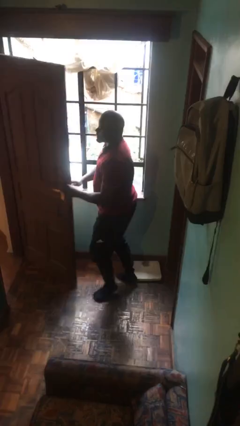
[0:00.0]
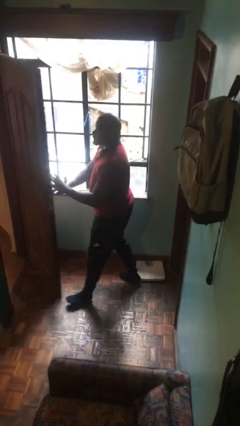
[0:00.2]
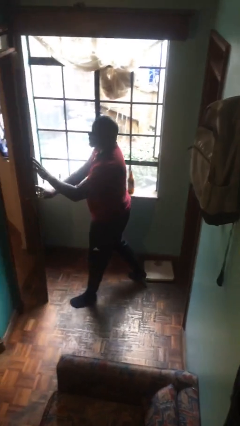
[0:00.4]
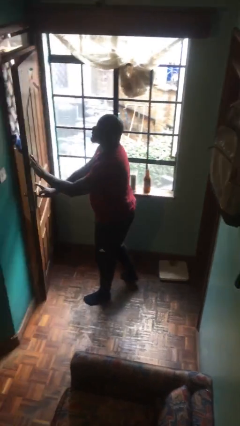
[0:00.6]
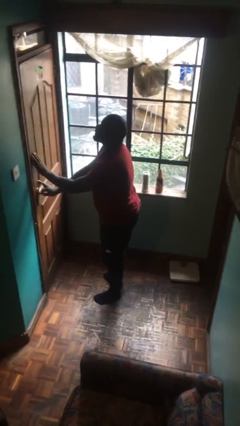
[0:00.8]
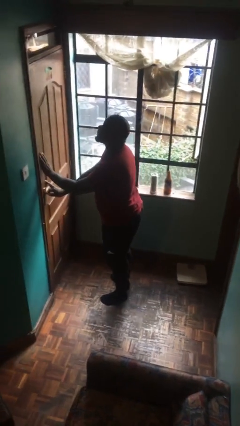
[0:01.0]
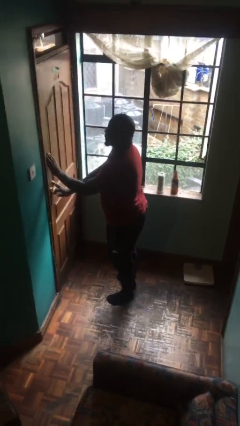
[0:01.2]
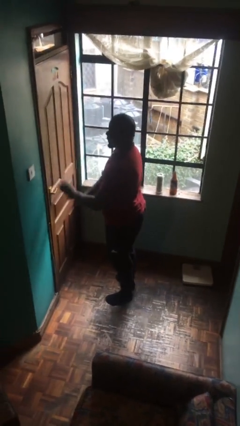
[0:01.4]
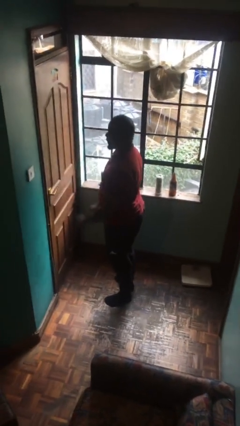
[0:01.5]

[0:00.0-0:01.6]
person closes facility door

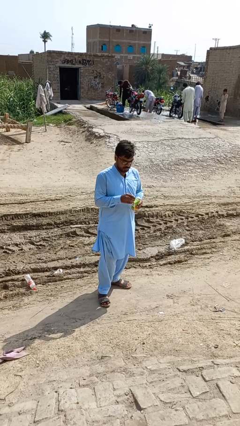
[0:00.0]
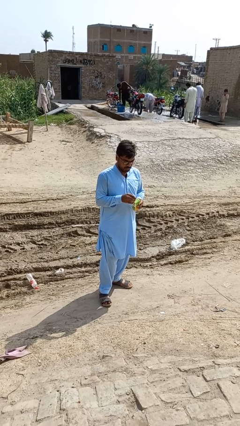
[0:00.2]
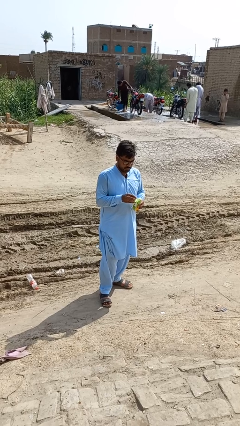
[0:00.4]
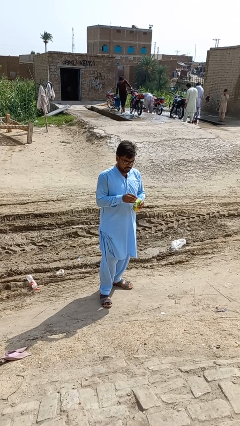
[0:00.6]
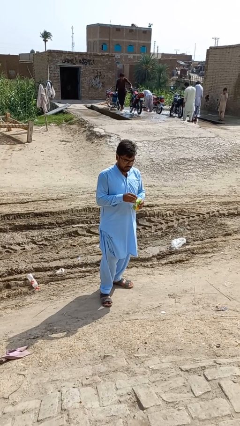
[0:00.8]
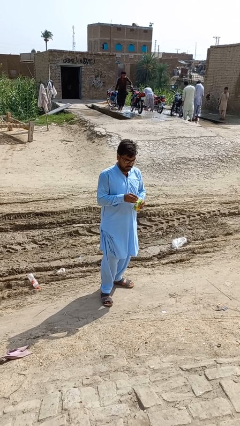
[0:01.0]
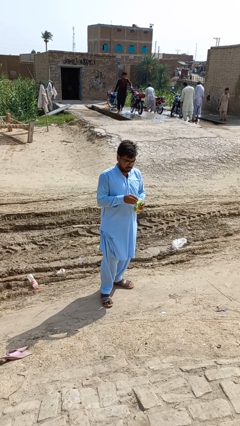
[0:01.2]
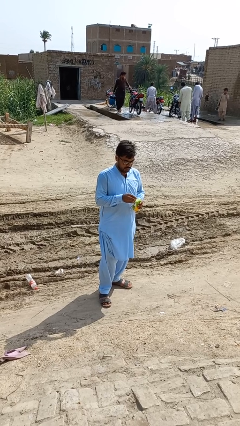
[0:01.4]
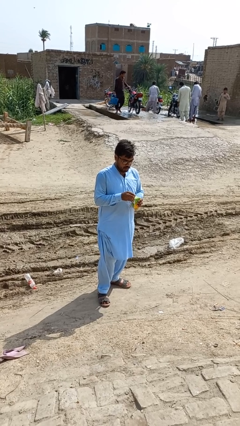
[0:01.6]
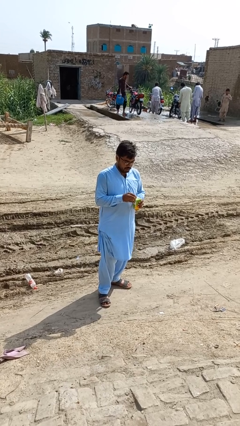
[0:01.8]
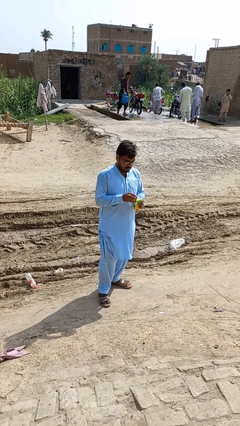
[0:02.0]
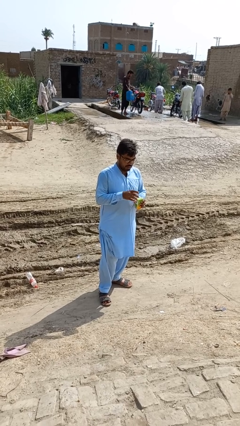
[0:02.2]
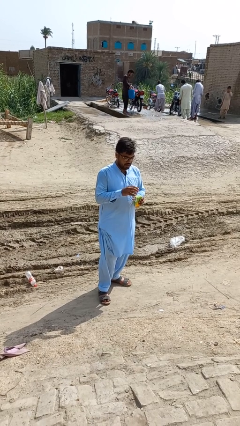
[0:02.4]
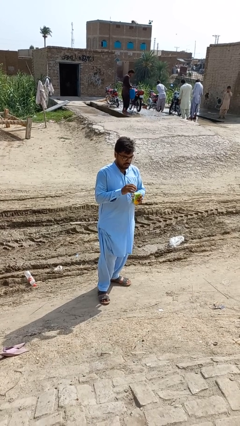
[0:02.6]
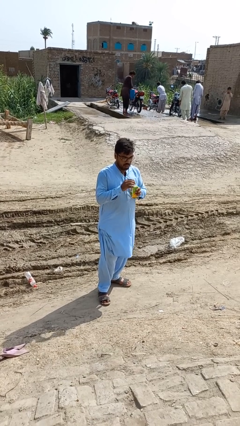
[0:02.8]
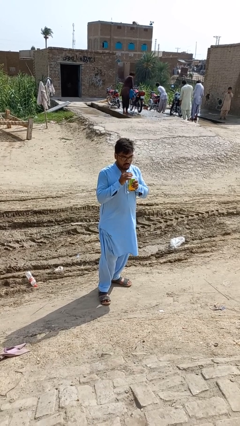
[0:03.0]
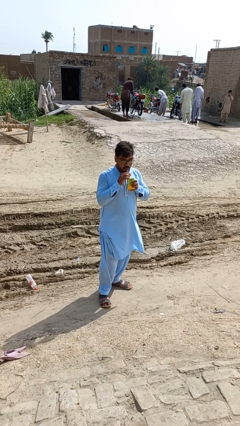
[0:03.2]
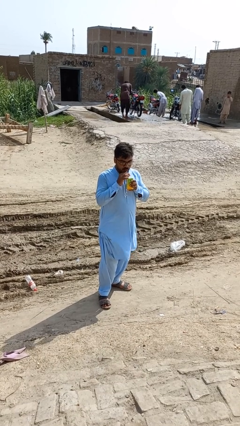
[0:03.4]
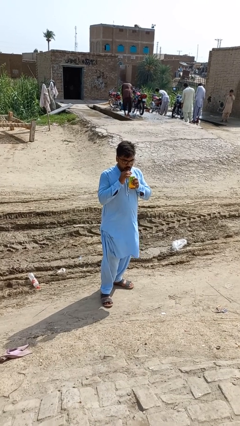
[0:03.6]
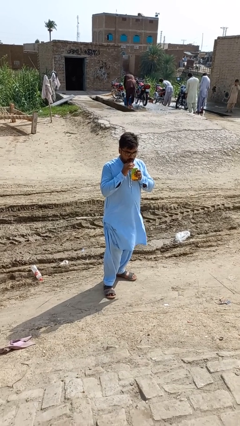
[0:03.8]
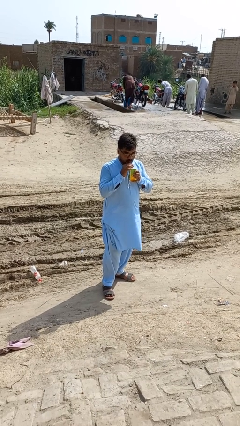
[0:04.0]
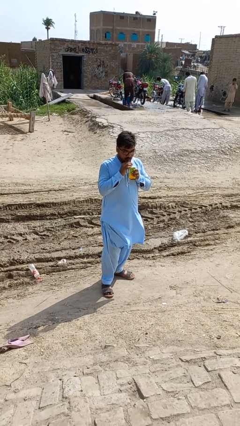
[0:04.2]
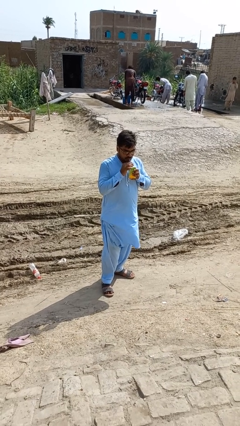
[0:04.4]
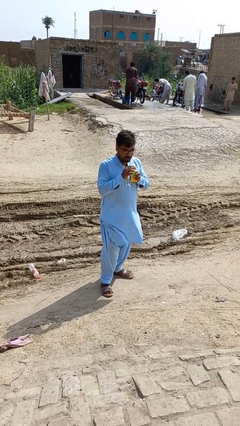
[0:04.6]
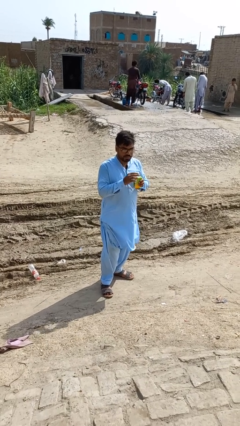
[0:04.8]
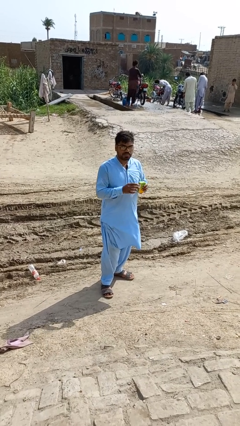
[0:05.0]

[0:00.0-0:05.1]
person drinks from straw

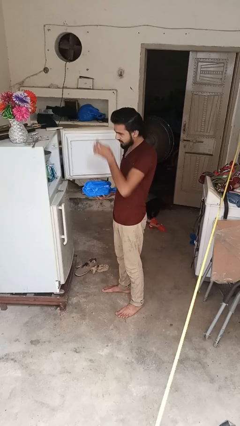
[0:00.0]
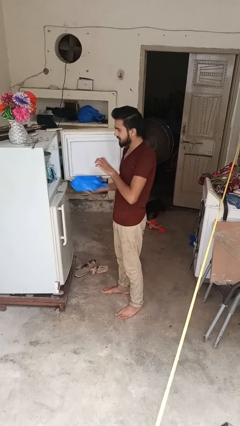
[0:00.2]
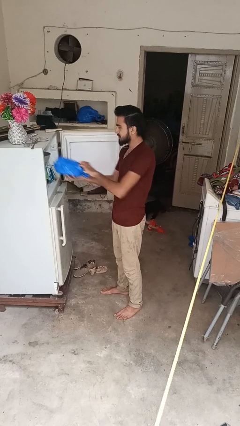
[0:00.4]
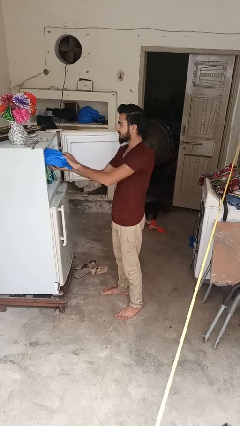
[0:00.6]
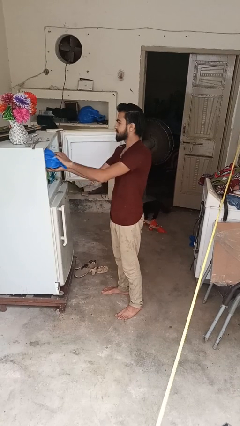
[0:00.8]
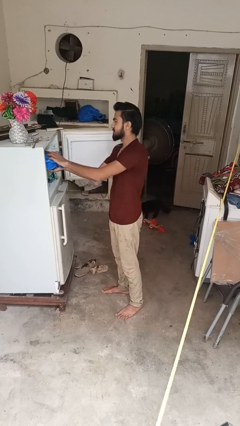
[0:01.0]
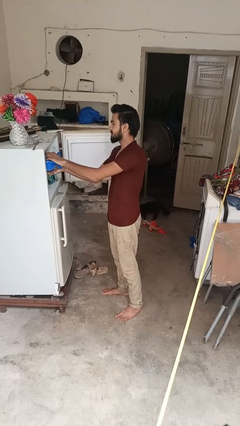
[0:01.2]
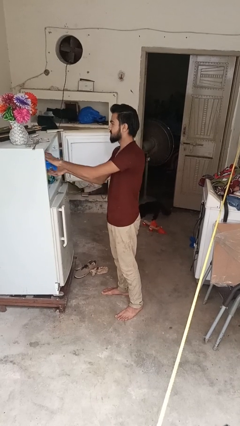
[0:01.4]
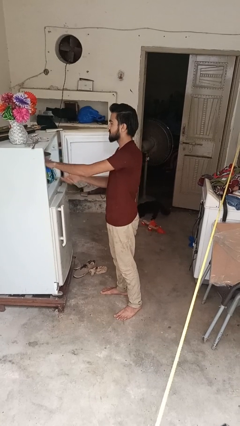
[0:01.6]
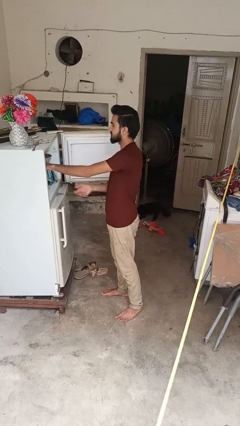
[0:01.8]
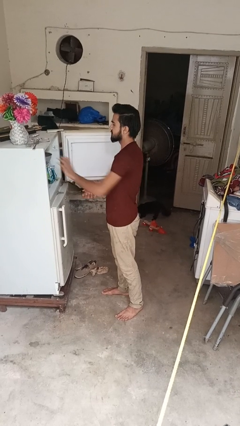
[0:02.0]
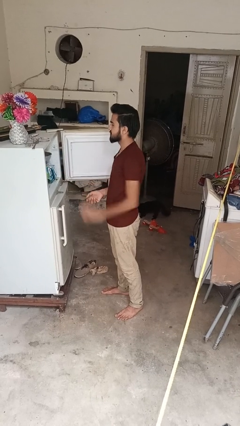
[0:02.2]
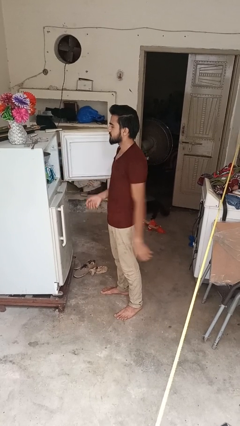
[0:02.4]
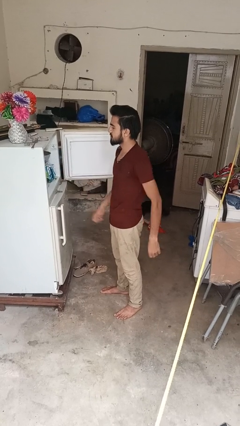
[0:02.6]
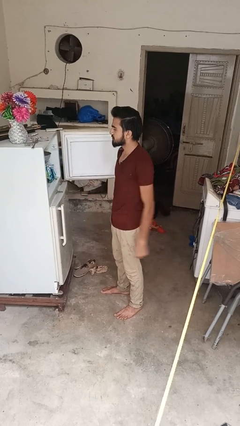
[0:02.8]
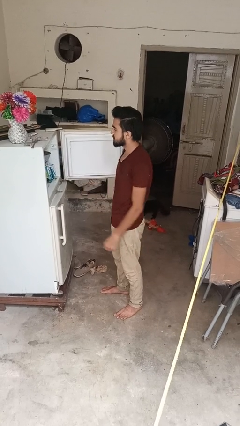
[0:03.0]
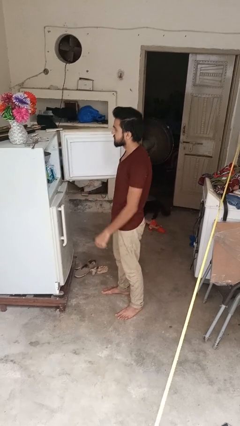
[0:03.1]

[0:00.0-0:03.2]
person loads groceries into refrigerator

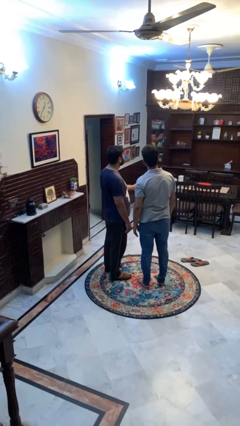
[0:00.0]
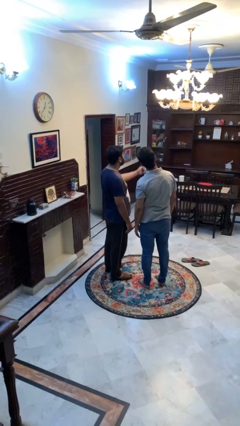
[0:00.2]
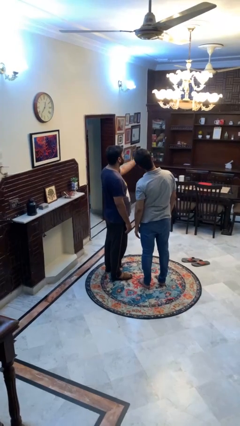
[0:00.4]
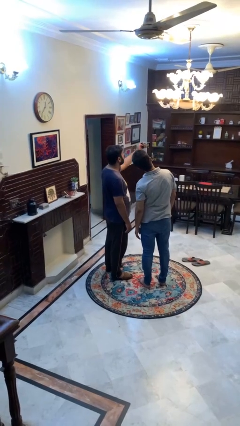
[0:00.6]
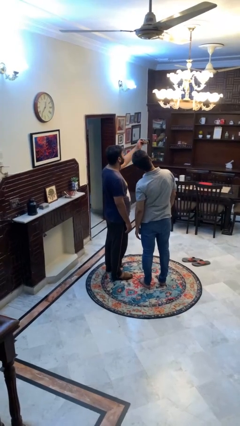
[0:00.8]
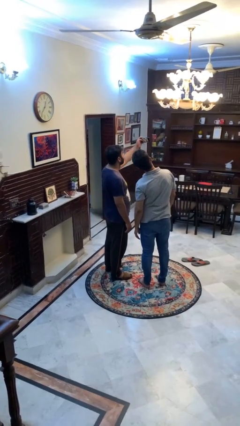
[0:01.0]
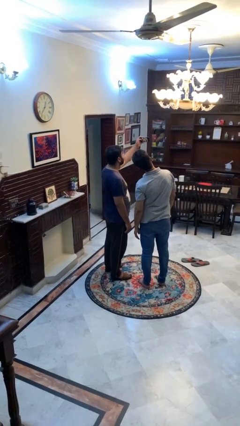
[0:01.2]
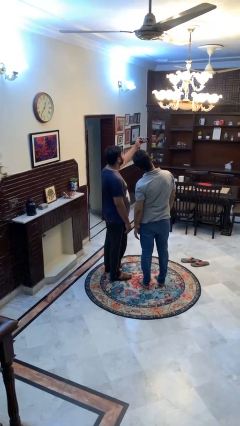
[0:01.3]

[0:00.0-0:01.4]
person takes selfie with person

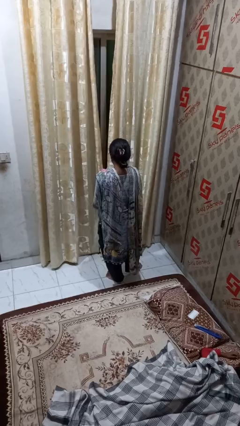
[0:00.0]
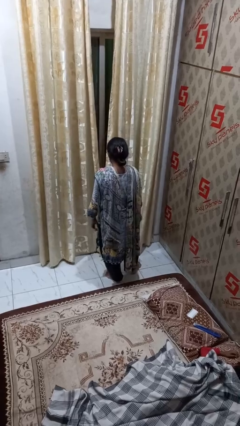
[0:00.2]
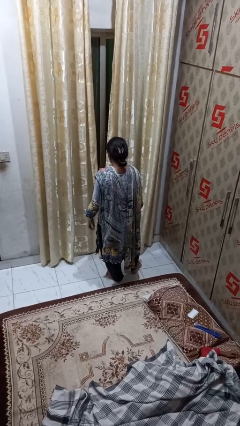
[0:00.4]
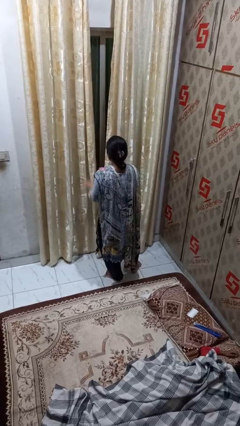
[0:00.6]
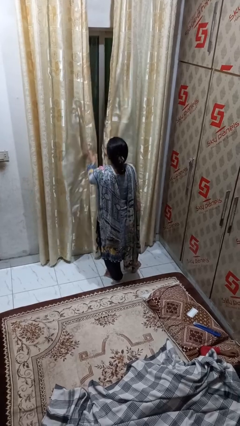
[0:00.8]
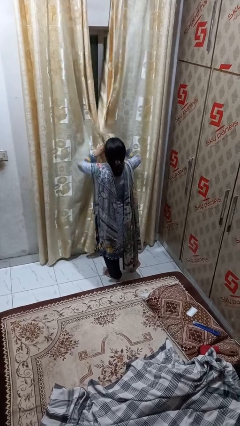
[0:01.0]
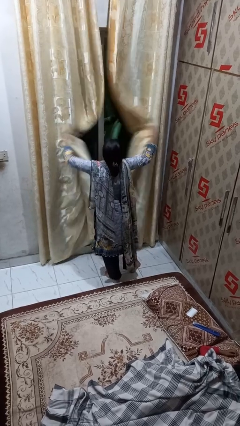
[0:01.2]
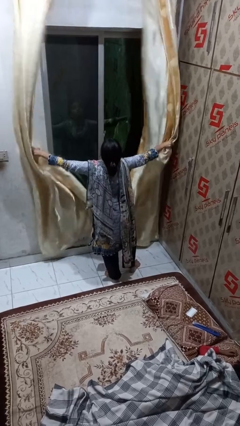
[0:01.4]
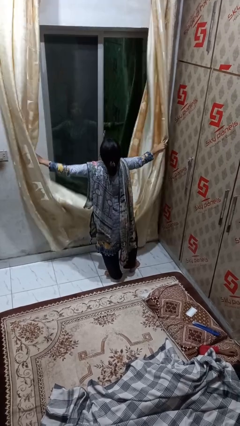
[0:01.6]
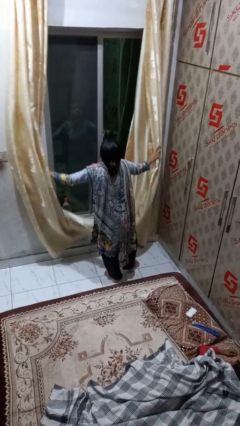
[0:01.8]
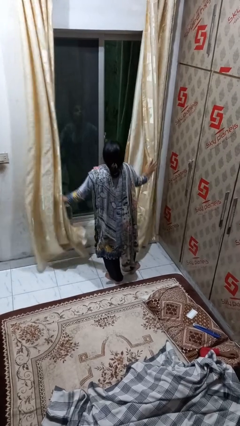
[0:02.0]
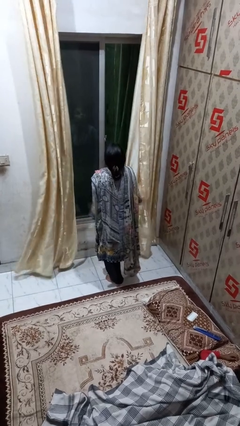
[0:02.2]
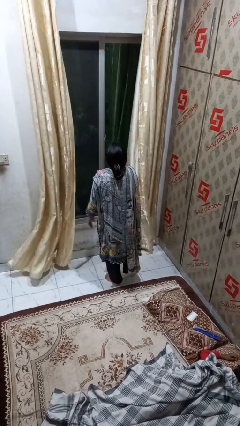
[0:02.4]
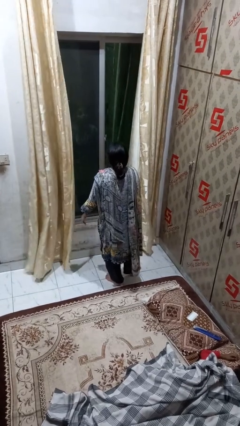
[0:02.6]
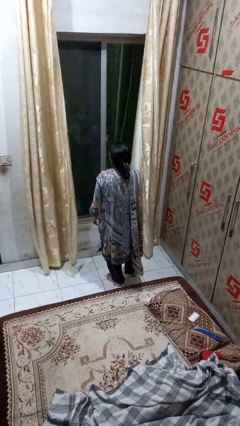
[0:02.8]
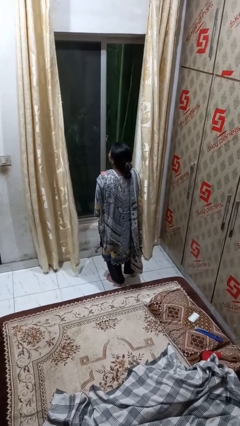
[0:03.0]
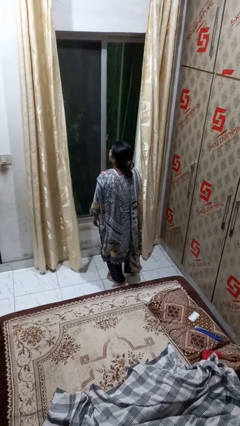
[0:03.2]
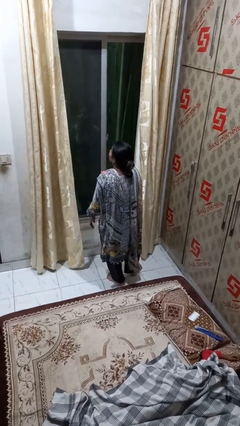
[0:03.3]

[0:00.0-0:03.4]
person opens curtains

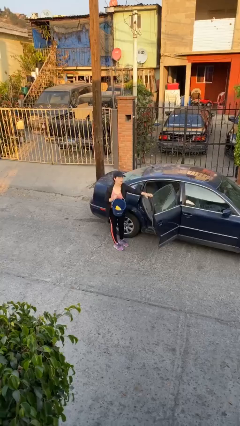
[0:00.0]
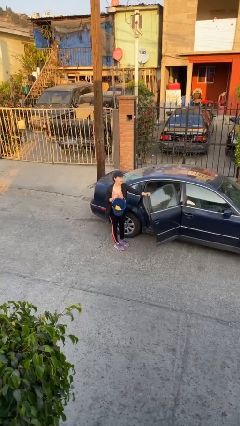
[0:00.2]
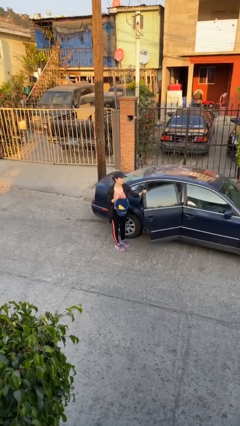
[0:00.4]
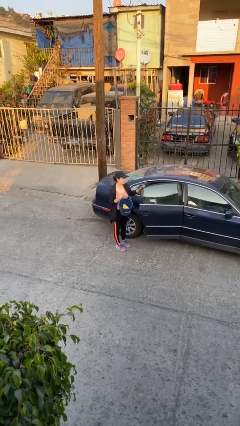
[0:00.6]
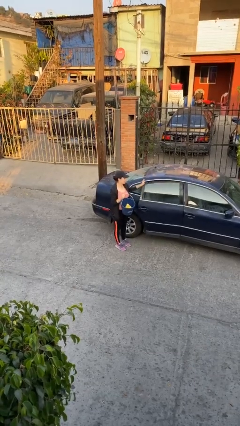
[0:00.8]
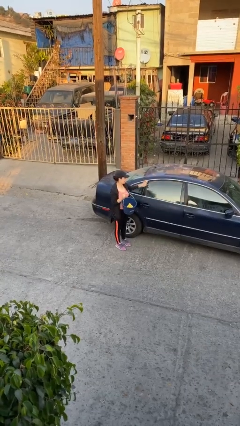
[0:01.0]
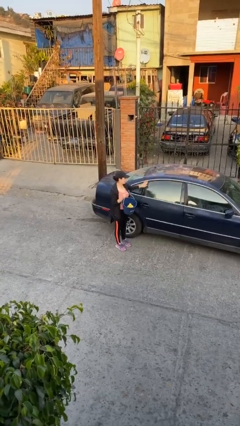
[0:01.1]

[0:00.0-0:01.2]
person closes car door

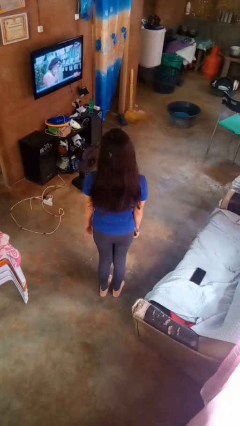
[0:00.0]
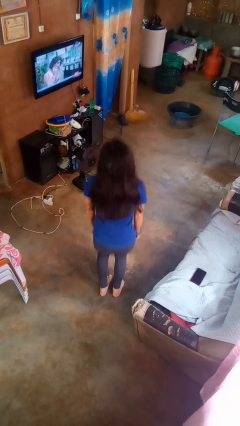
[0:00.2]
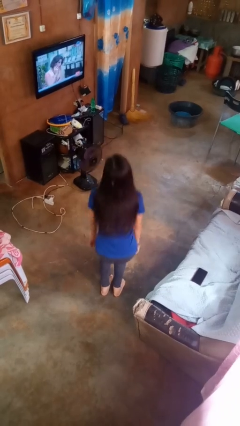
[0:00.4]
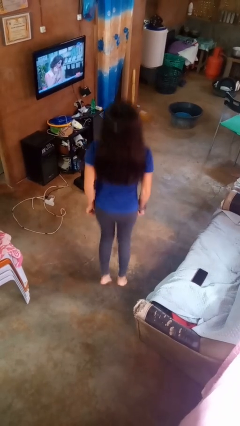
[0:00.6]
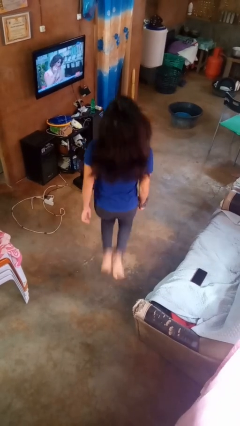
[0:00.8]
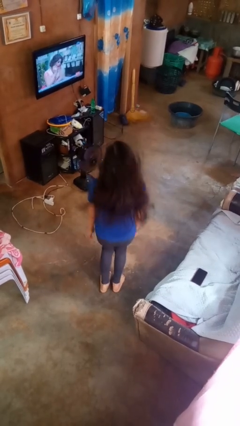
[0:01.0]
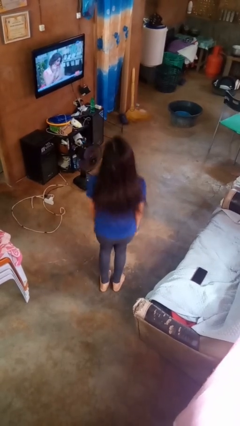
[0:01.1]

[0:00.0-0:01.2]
person jumps

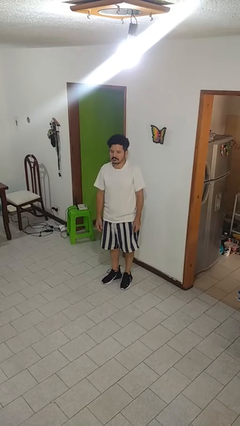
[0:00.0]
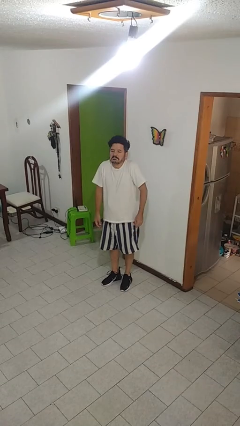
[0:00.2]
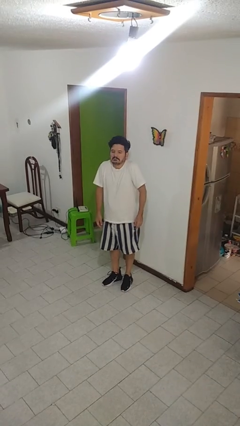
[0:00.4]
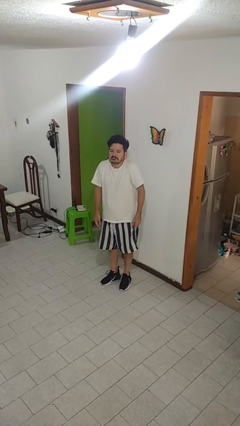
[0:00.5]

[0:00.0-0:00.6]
person shrugs
